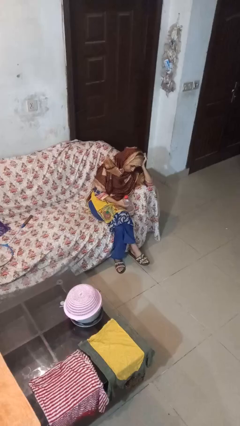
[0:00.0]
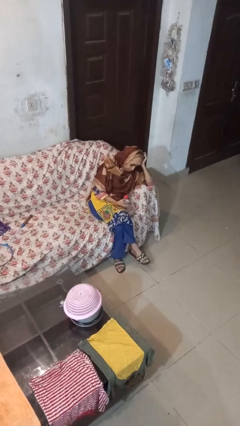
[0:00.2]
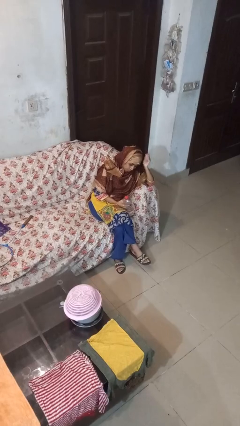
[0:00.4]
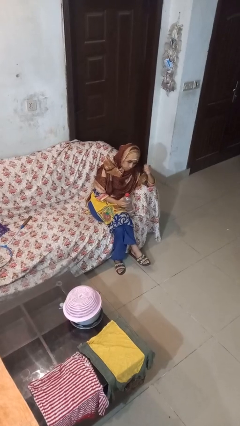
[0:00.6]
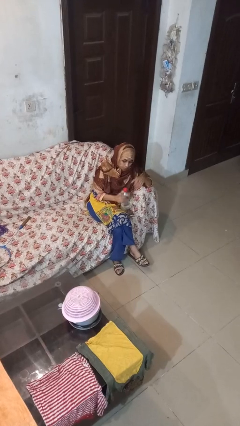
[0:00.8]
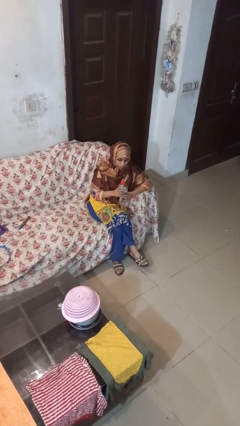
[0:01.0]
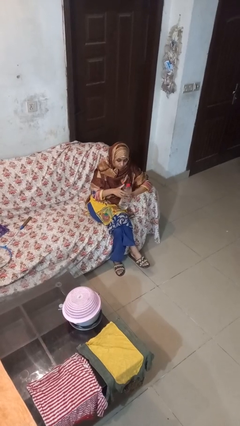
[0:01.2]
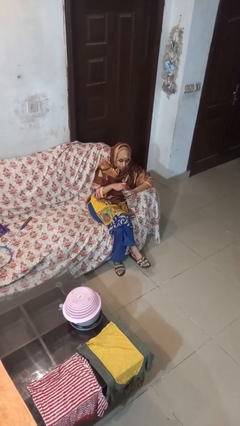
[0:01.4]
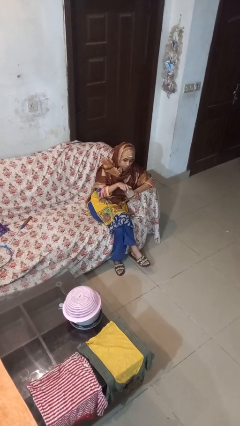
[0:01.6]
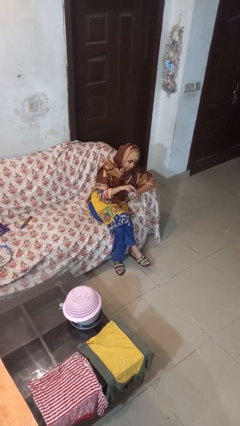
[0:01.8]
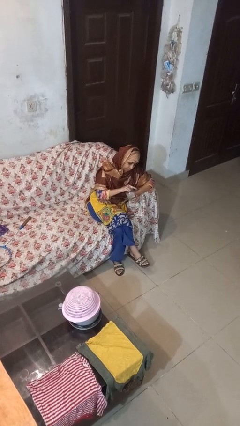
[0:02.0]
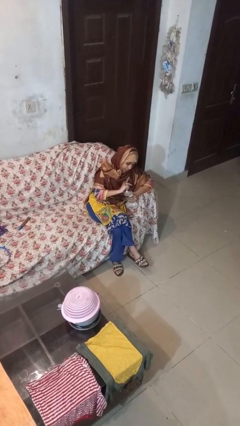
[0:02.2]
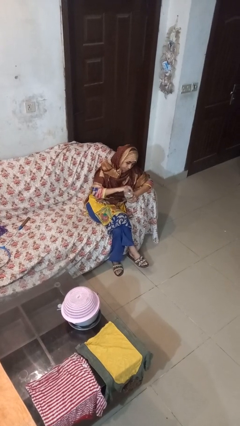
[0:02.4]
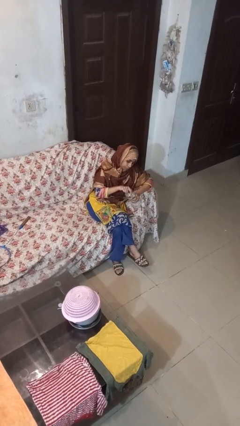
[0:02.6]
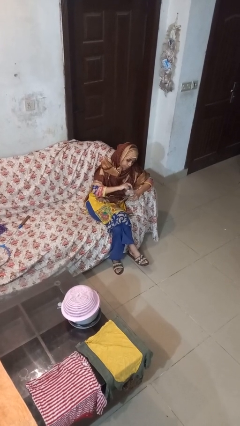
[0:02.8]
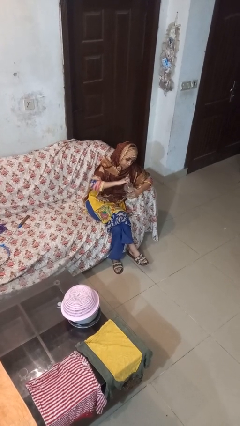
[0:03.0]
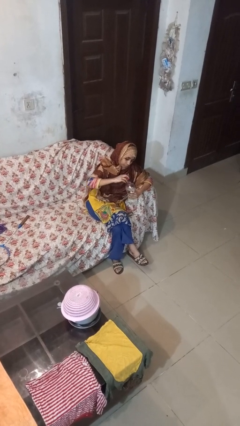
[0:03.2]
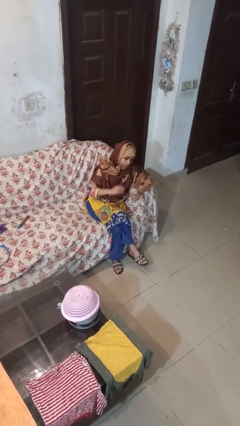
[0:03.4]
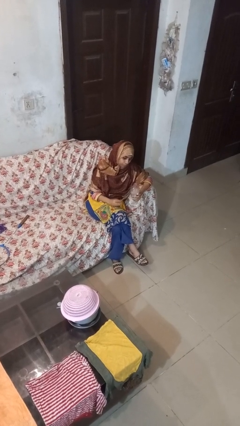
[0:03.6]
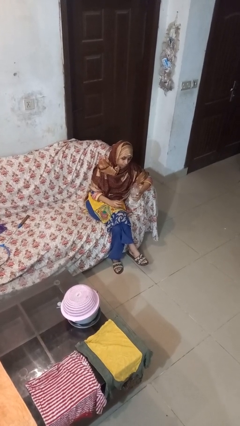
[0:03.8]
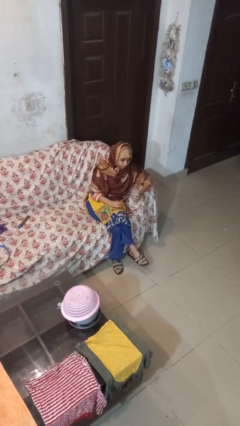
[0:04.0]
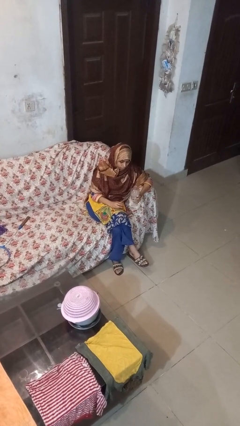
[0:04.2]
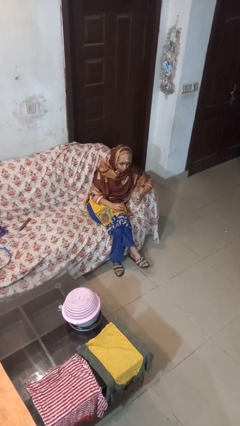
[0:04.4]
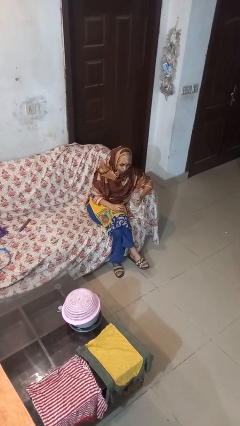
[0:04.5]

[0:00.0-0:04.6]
person unscrews lid from bottle

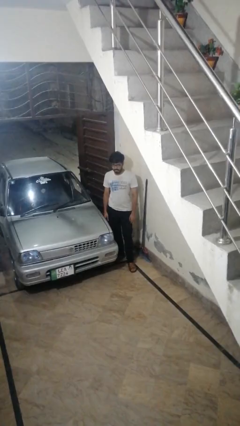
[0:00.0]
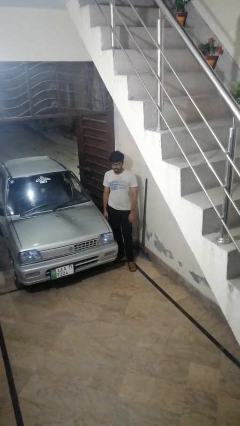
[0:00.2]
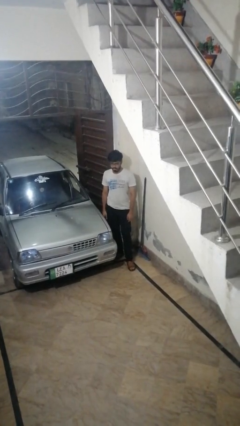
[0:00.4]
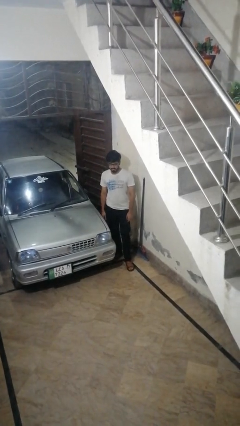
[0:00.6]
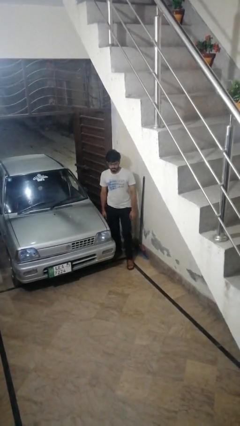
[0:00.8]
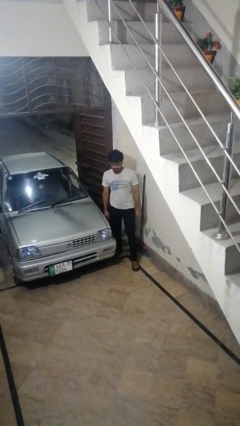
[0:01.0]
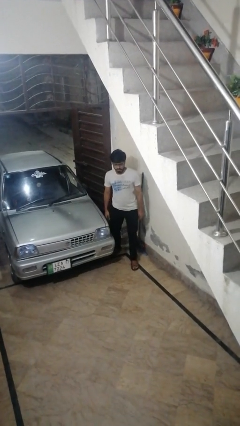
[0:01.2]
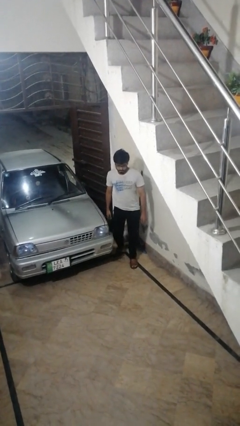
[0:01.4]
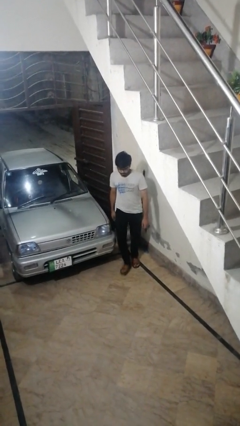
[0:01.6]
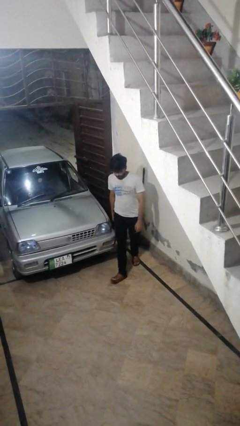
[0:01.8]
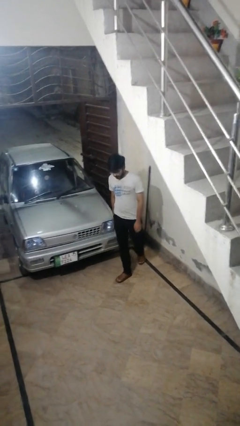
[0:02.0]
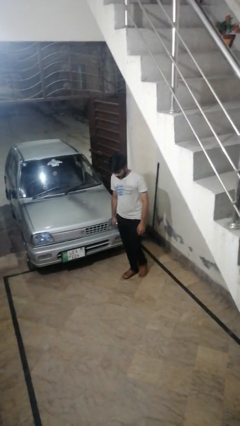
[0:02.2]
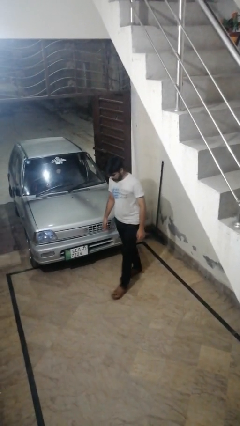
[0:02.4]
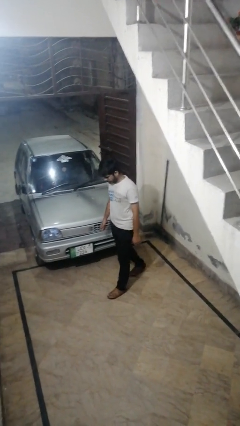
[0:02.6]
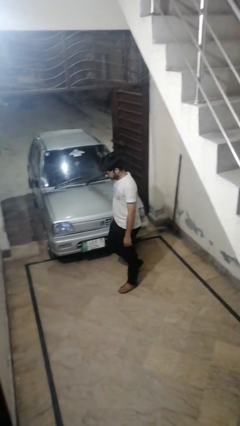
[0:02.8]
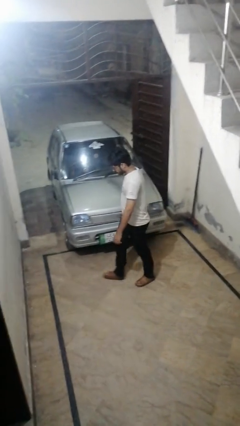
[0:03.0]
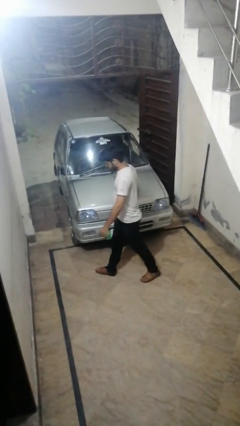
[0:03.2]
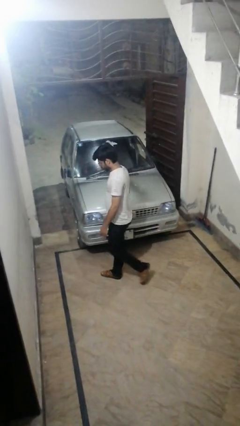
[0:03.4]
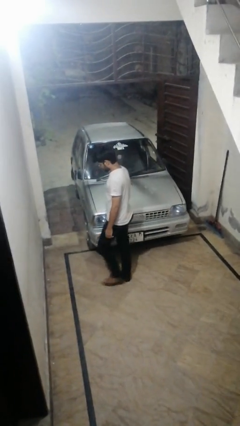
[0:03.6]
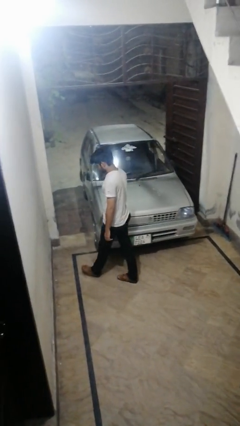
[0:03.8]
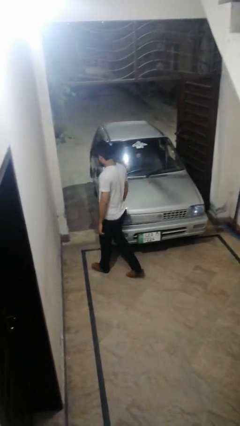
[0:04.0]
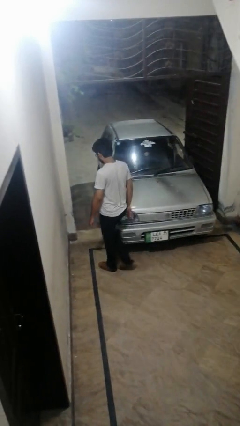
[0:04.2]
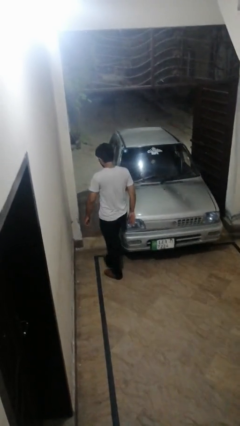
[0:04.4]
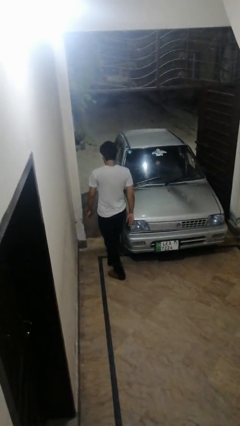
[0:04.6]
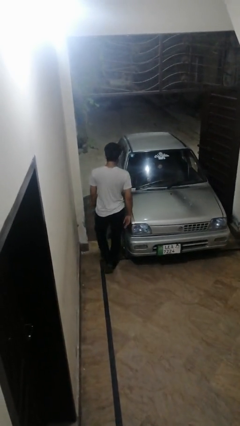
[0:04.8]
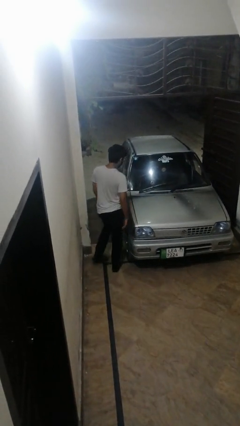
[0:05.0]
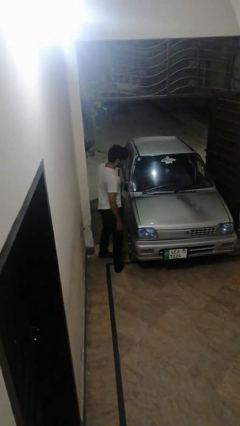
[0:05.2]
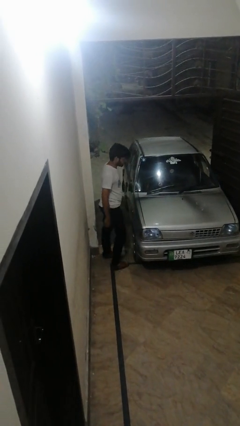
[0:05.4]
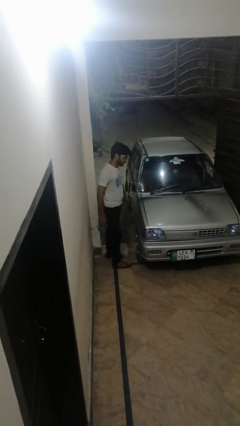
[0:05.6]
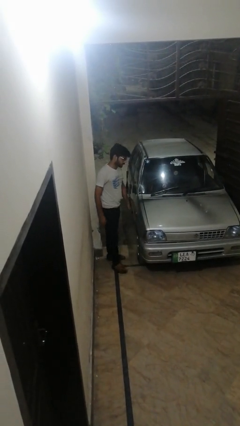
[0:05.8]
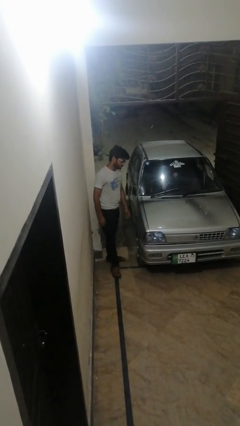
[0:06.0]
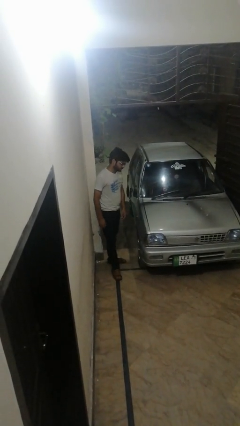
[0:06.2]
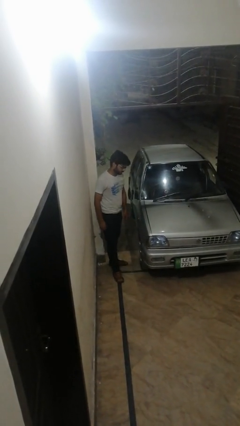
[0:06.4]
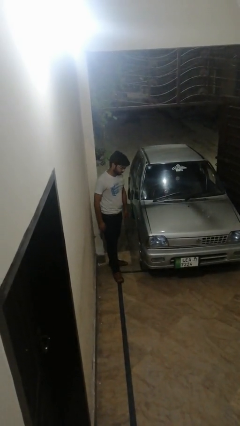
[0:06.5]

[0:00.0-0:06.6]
person walks around car

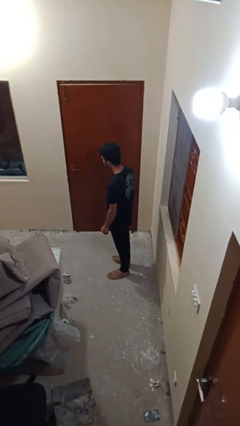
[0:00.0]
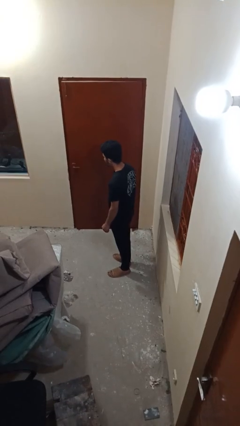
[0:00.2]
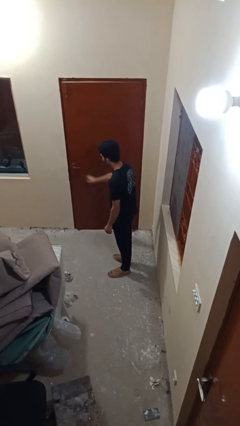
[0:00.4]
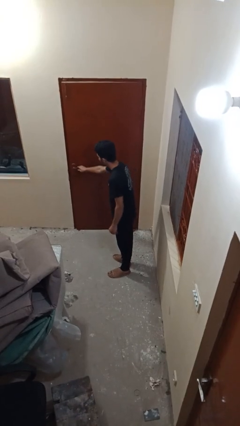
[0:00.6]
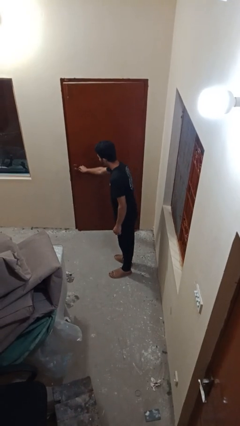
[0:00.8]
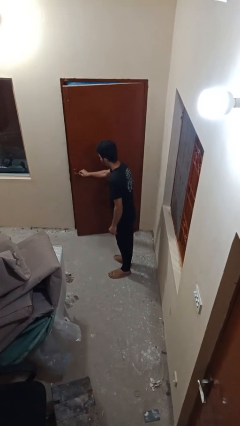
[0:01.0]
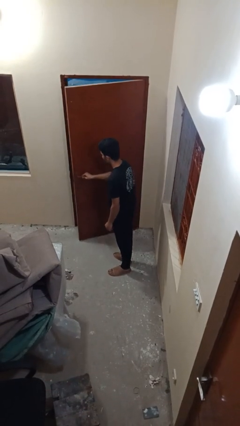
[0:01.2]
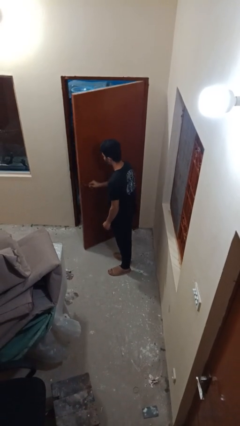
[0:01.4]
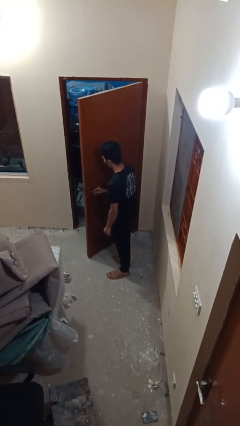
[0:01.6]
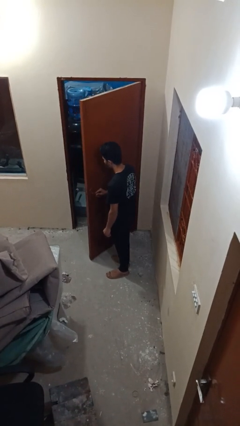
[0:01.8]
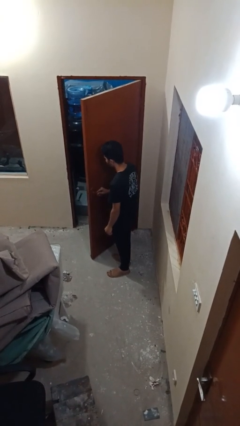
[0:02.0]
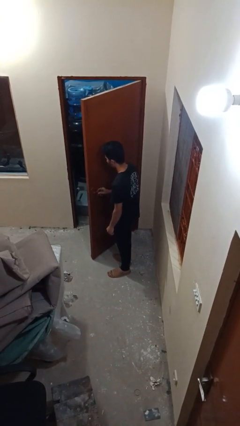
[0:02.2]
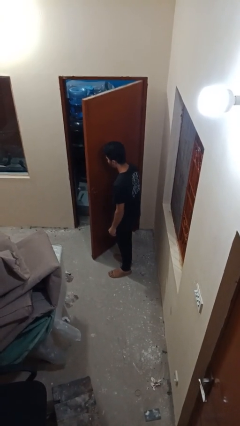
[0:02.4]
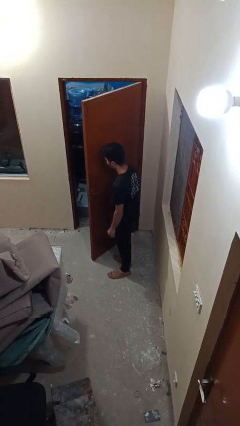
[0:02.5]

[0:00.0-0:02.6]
person opens facility door

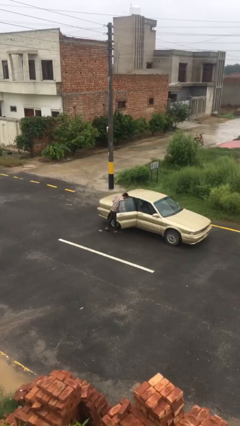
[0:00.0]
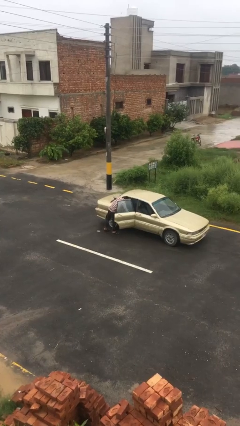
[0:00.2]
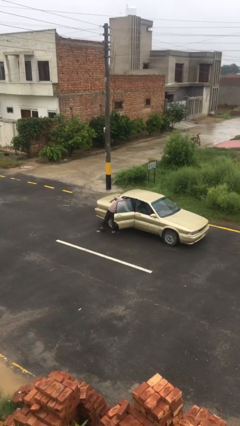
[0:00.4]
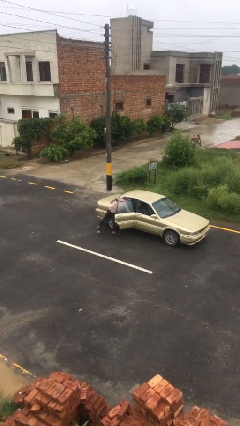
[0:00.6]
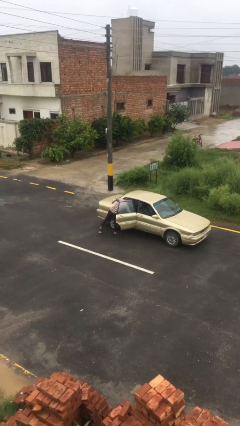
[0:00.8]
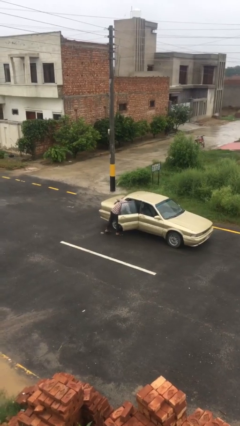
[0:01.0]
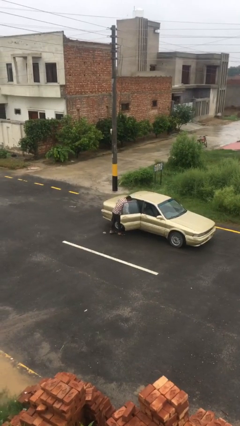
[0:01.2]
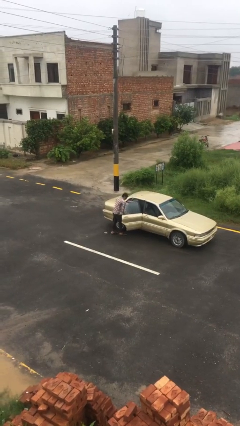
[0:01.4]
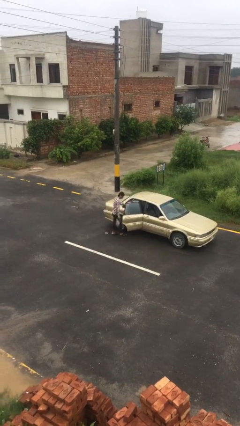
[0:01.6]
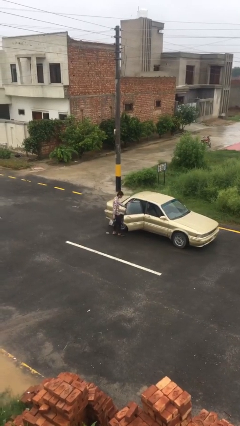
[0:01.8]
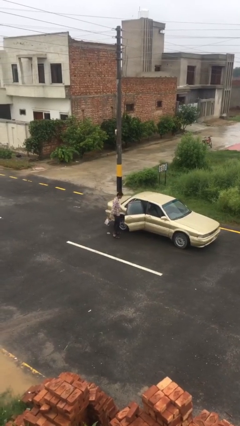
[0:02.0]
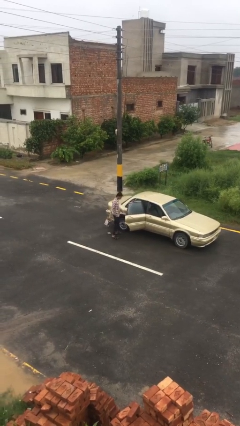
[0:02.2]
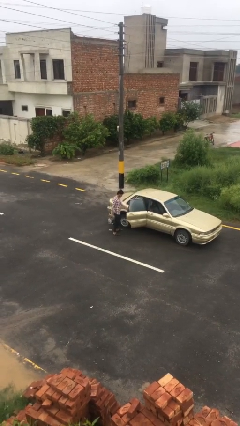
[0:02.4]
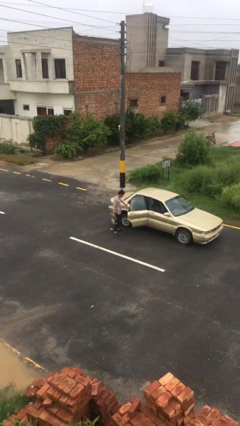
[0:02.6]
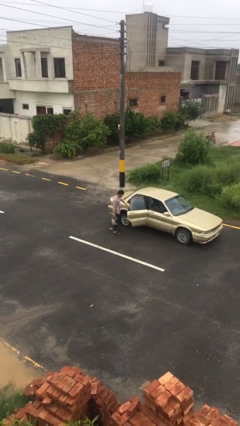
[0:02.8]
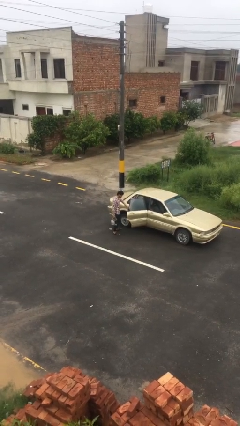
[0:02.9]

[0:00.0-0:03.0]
person unloads car

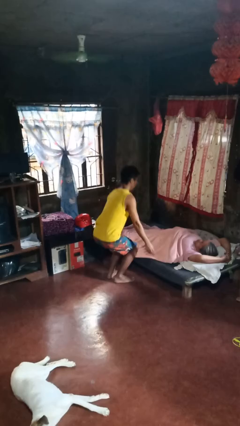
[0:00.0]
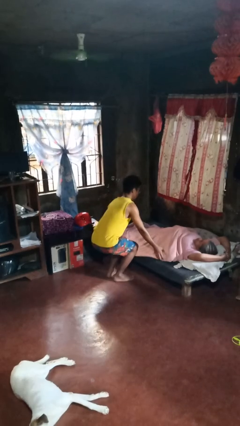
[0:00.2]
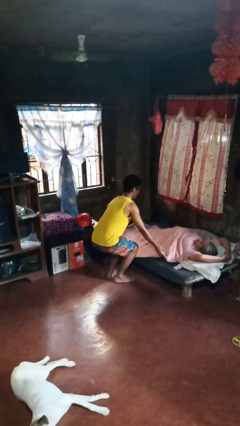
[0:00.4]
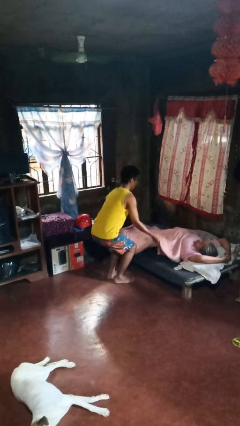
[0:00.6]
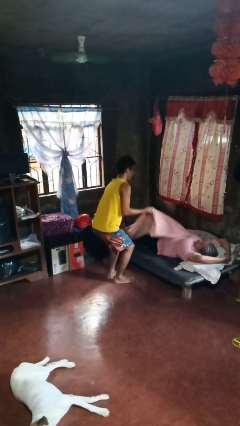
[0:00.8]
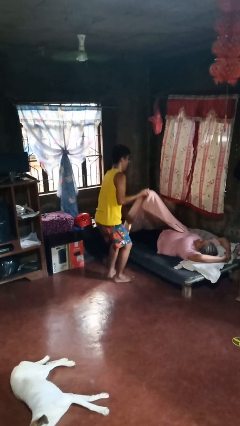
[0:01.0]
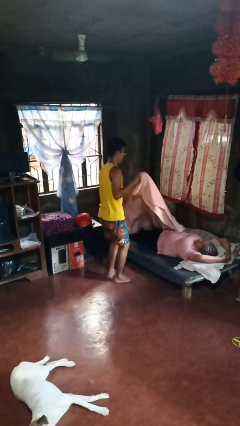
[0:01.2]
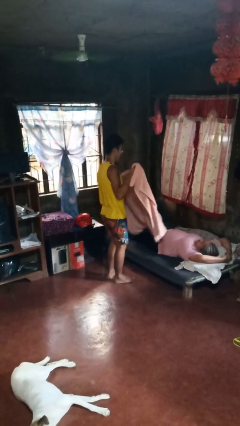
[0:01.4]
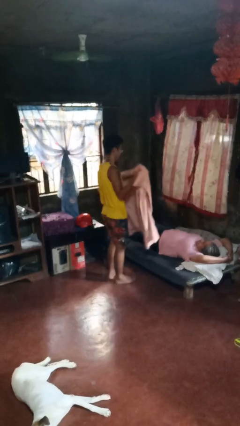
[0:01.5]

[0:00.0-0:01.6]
person uncovers friend with blanket
